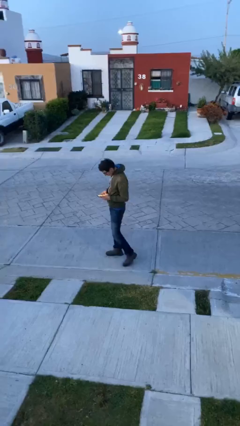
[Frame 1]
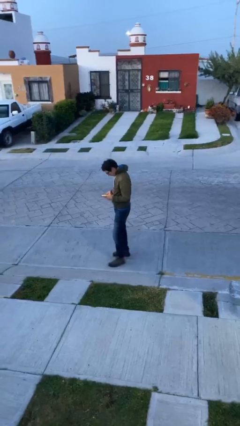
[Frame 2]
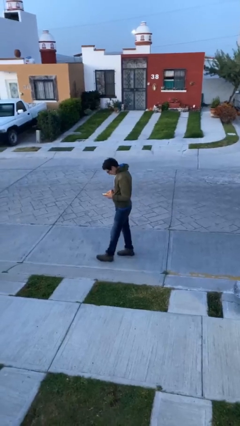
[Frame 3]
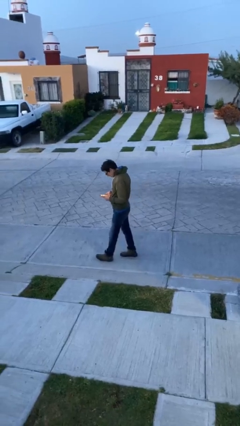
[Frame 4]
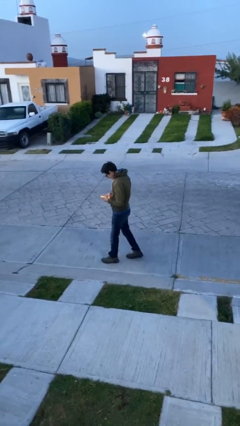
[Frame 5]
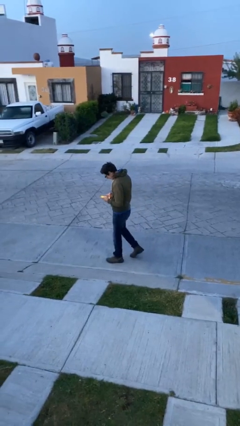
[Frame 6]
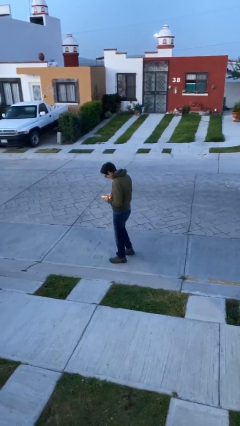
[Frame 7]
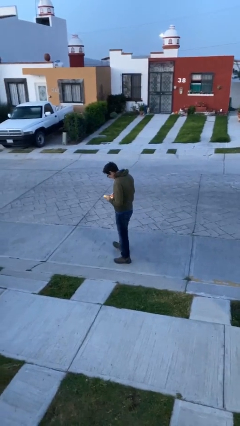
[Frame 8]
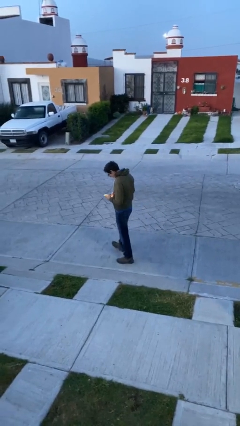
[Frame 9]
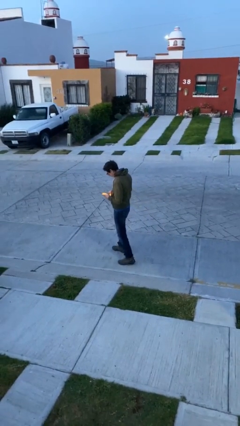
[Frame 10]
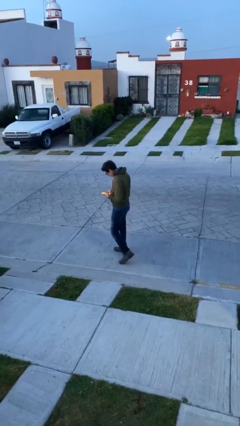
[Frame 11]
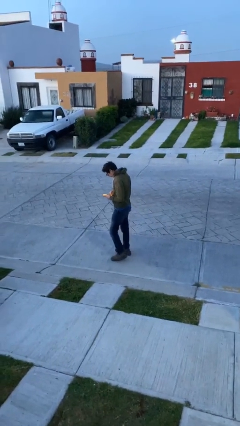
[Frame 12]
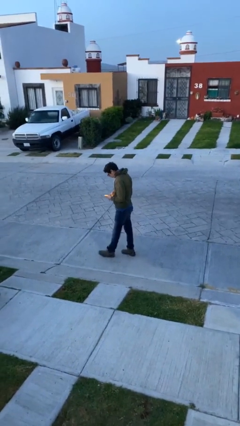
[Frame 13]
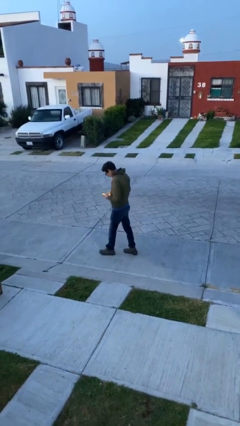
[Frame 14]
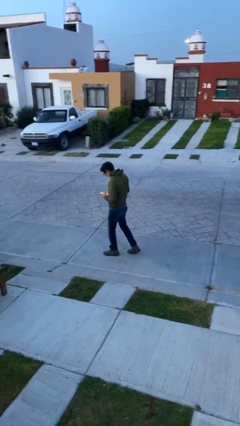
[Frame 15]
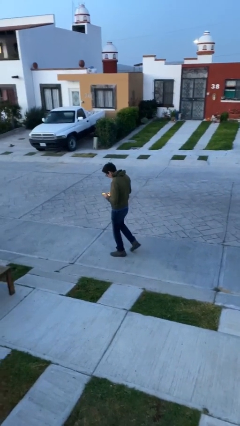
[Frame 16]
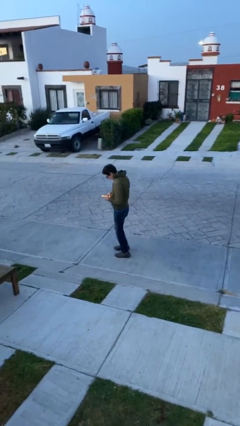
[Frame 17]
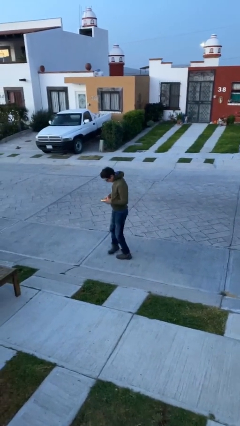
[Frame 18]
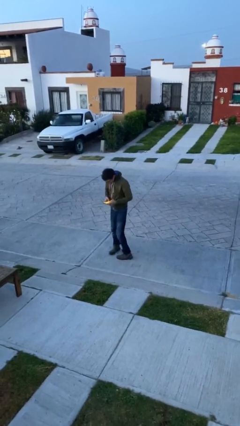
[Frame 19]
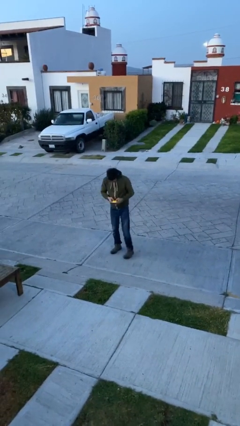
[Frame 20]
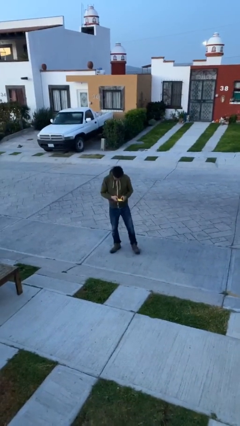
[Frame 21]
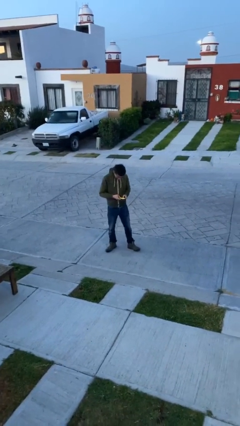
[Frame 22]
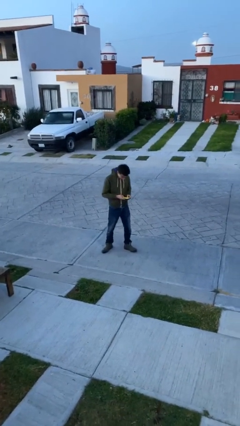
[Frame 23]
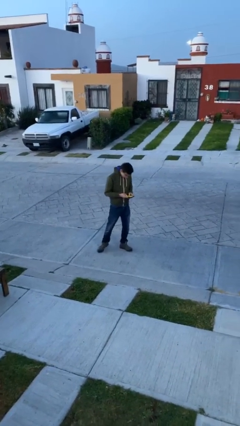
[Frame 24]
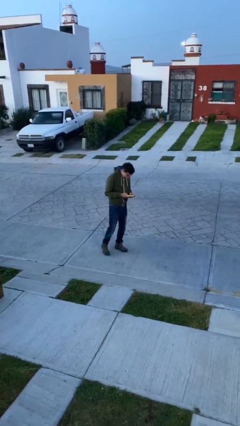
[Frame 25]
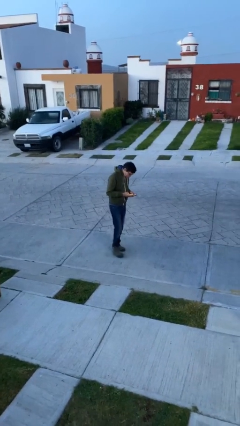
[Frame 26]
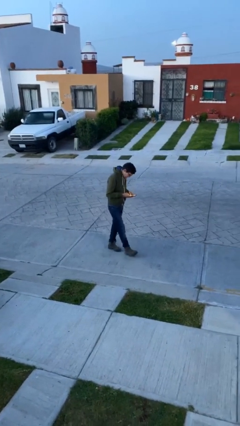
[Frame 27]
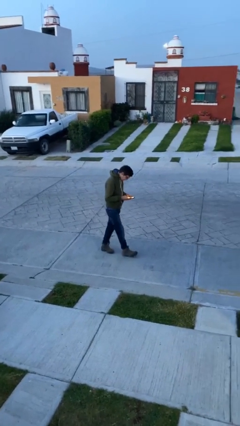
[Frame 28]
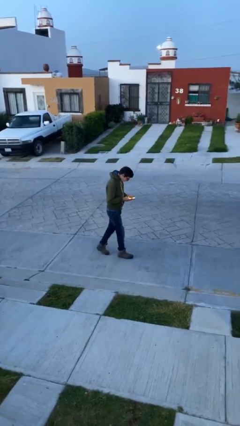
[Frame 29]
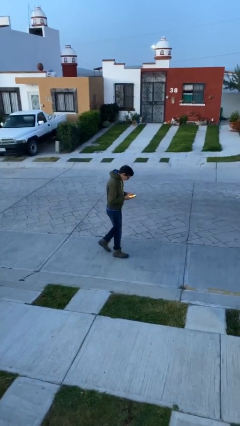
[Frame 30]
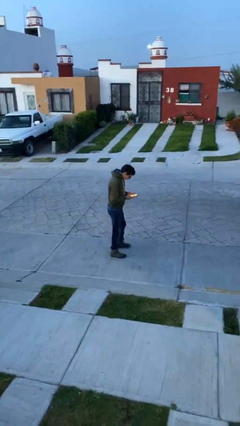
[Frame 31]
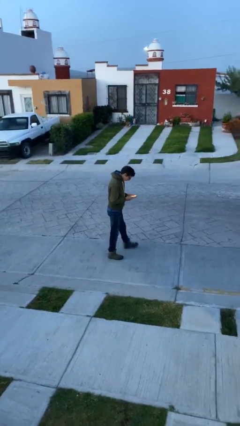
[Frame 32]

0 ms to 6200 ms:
person texts on phone

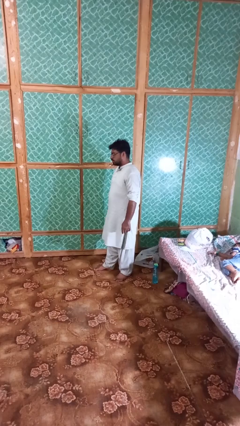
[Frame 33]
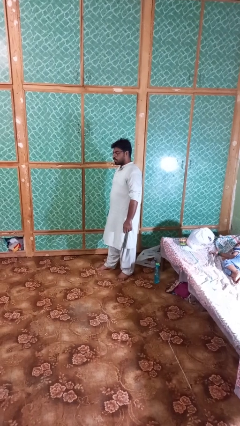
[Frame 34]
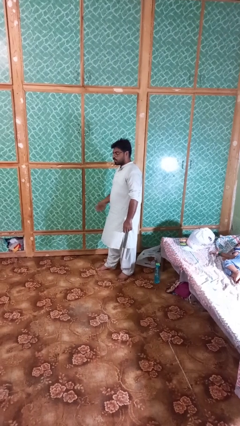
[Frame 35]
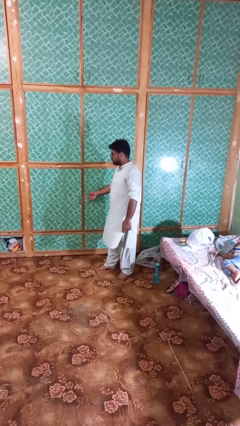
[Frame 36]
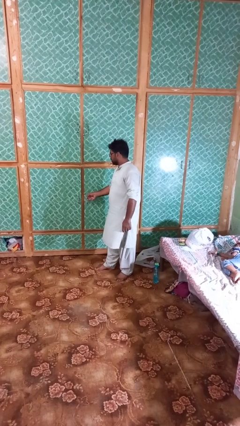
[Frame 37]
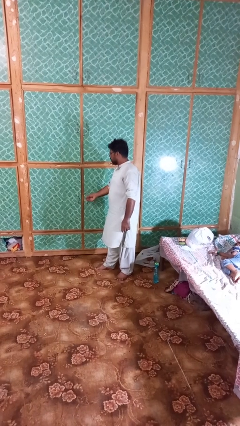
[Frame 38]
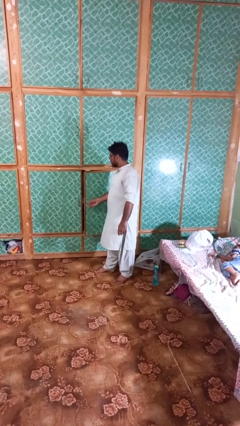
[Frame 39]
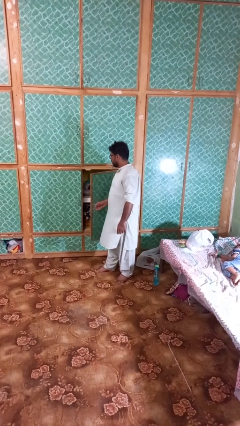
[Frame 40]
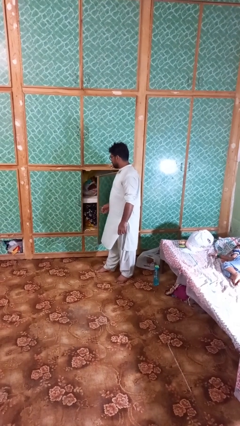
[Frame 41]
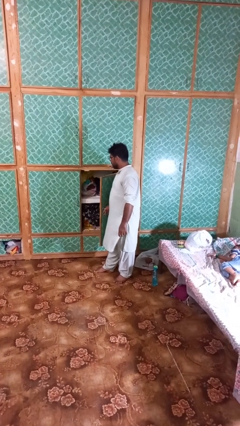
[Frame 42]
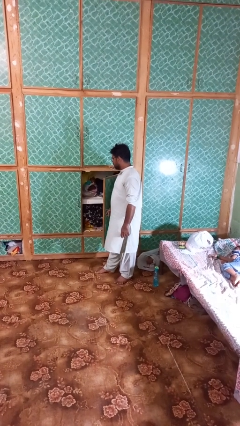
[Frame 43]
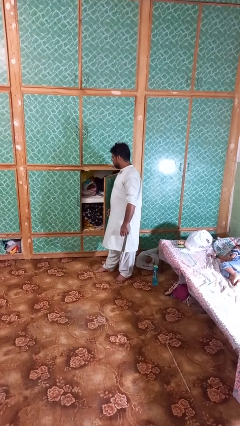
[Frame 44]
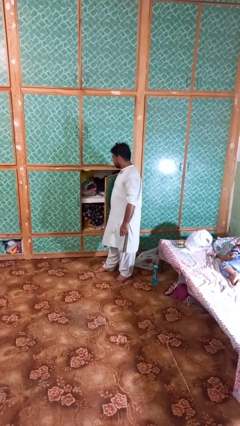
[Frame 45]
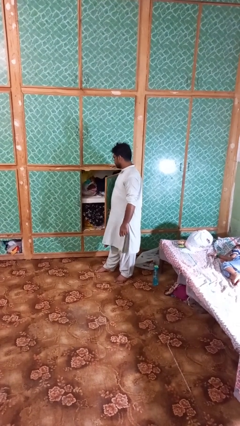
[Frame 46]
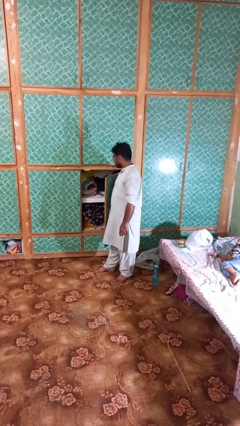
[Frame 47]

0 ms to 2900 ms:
person opens closet door

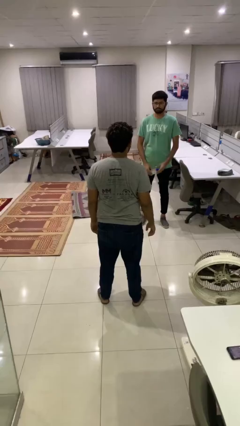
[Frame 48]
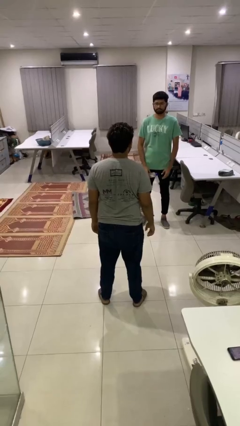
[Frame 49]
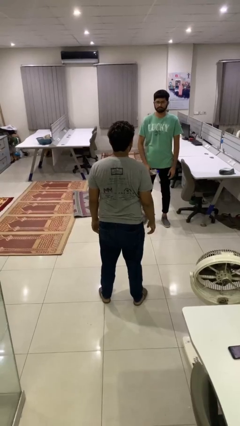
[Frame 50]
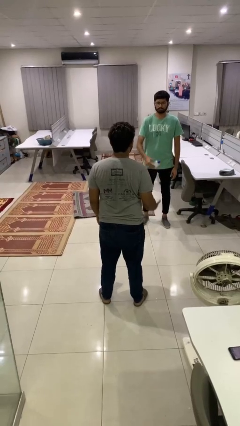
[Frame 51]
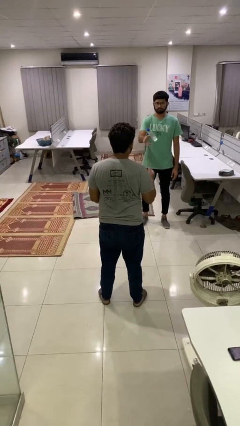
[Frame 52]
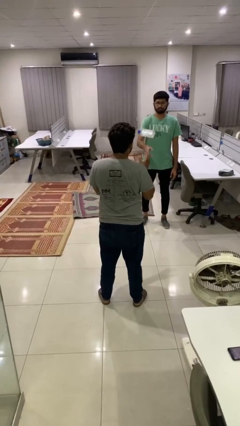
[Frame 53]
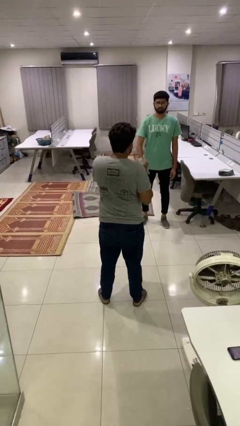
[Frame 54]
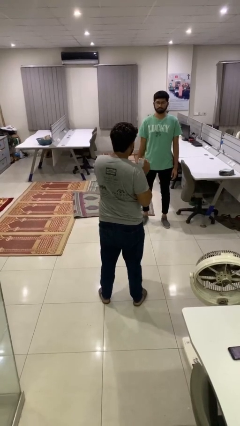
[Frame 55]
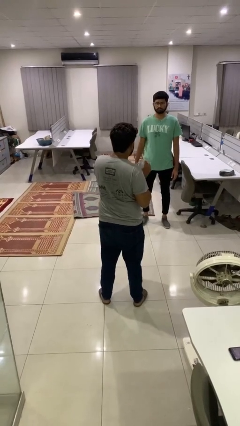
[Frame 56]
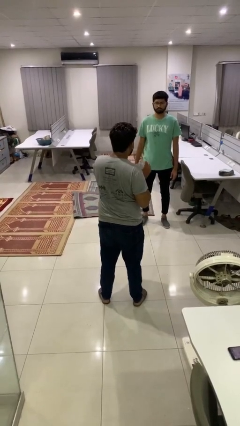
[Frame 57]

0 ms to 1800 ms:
person catches object from person

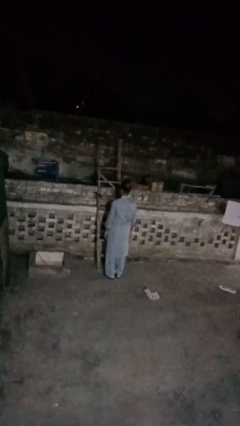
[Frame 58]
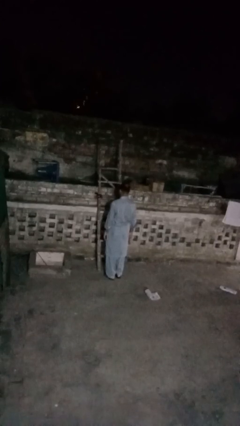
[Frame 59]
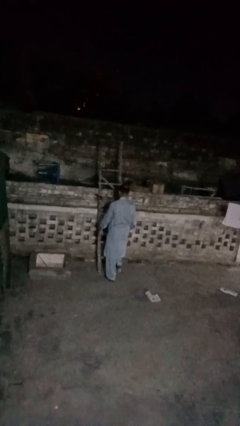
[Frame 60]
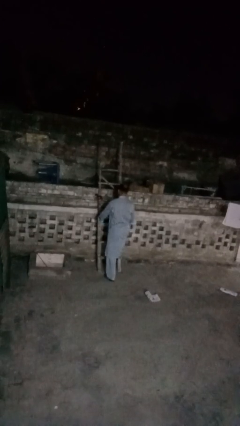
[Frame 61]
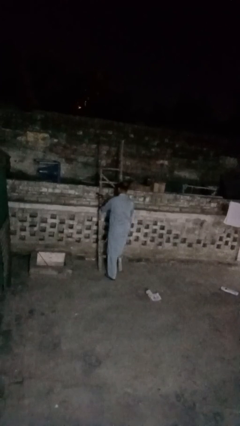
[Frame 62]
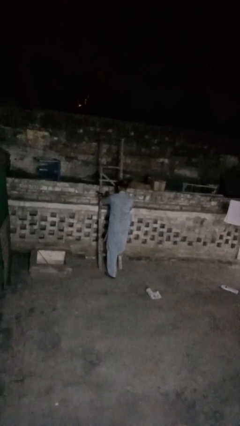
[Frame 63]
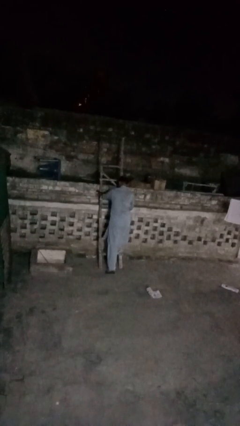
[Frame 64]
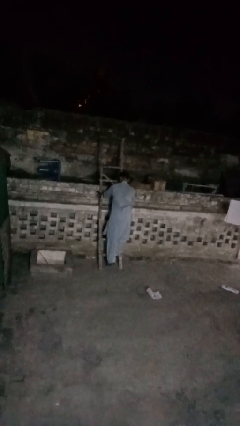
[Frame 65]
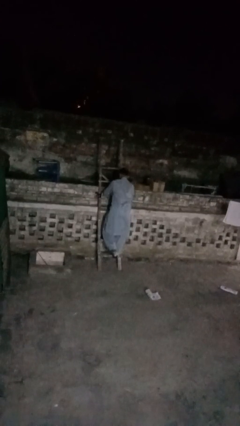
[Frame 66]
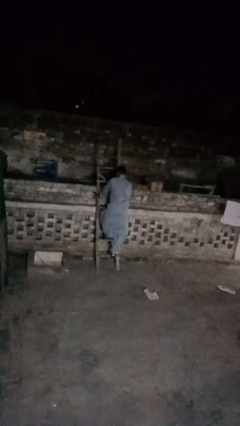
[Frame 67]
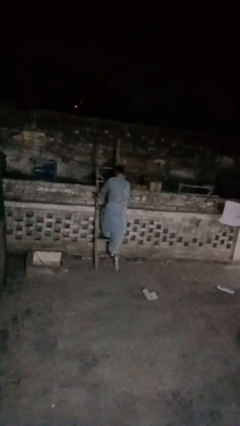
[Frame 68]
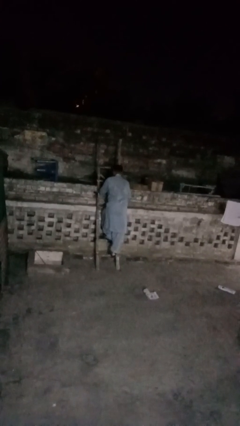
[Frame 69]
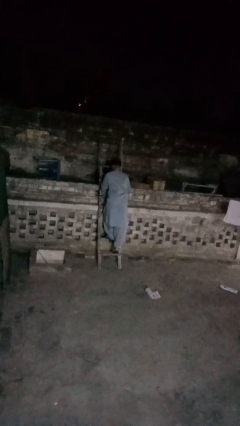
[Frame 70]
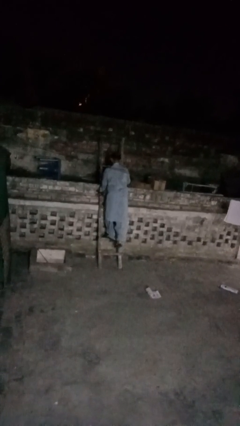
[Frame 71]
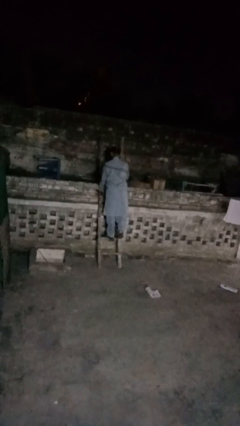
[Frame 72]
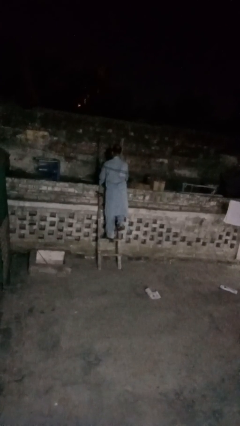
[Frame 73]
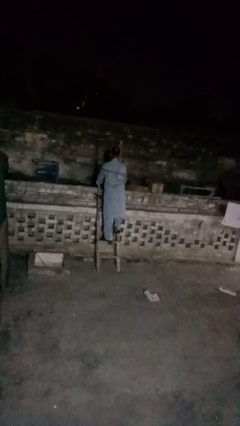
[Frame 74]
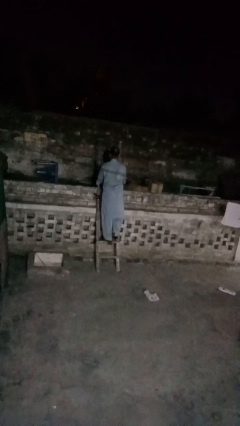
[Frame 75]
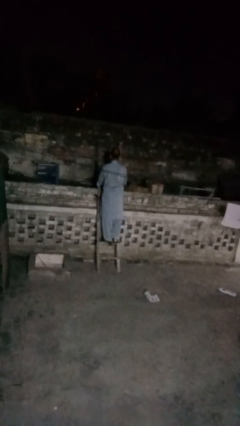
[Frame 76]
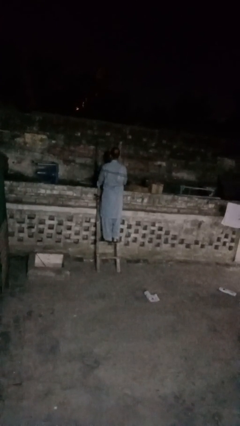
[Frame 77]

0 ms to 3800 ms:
person climbs up ladder

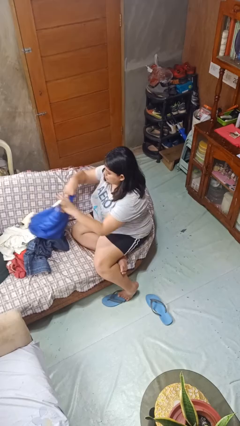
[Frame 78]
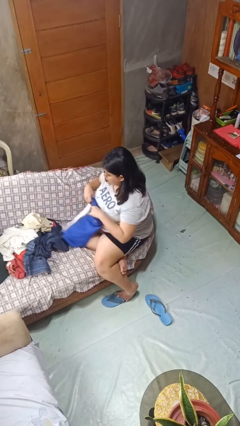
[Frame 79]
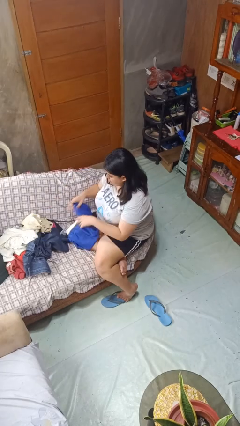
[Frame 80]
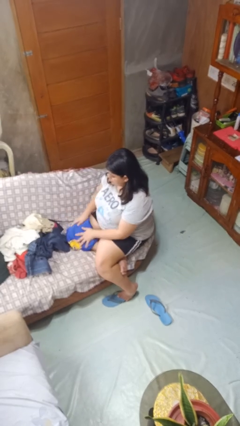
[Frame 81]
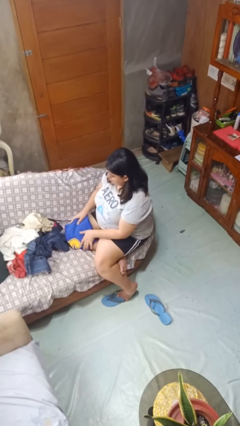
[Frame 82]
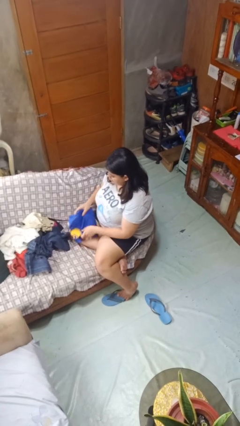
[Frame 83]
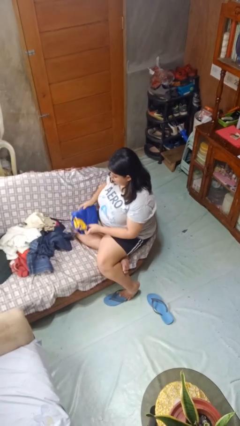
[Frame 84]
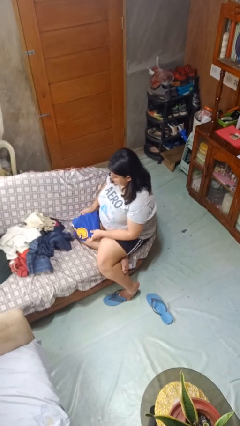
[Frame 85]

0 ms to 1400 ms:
person folds shirt

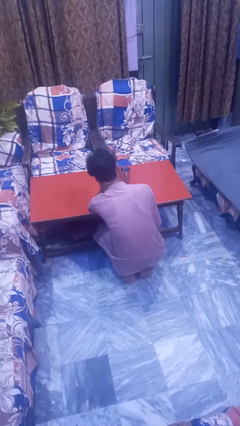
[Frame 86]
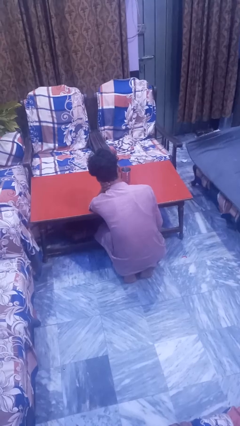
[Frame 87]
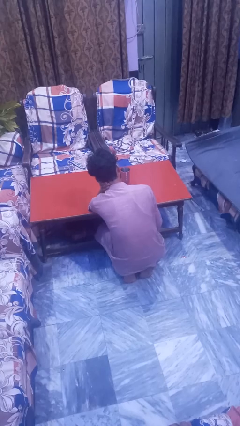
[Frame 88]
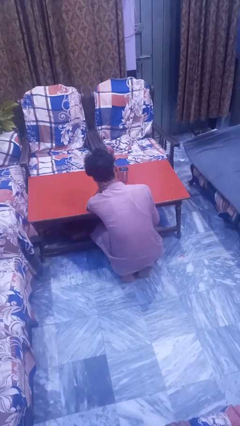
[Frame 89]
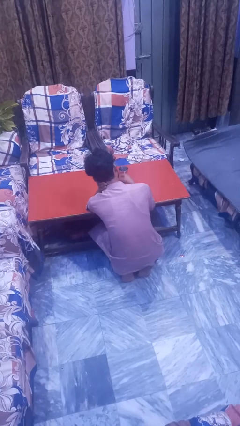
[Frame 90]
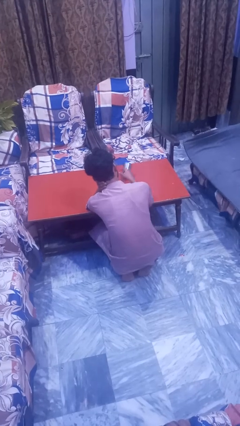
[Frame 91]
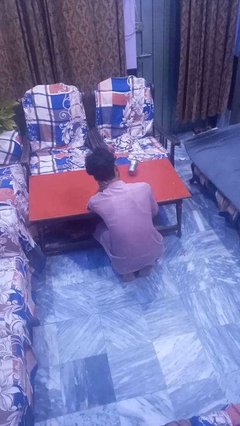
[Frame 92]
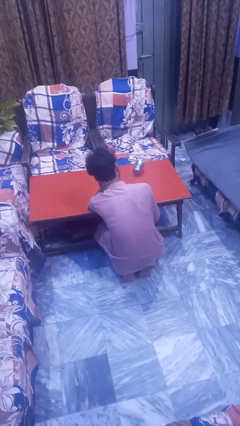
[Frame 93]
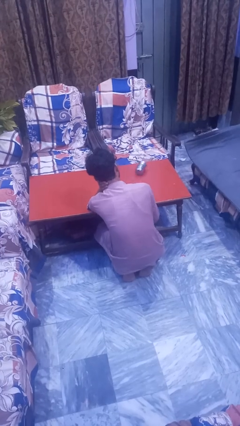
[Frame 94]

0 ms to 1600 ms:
person knocks over glass
